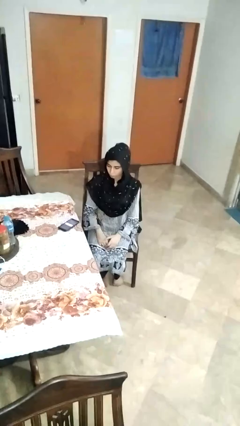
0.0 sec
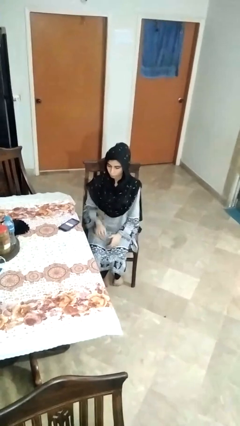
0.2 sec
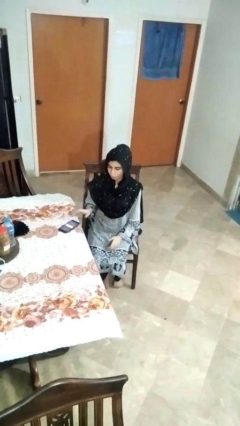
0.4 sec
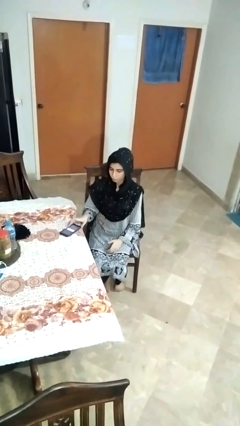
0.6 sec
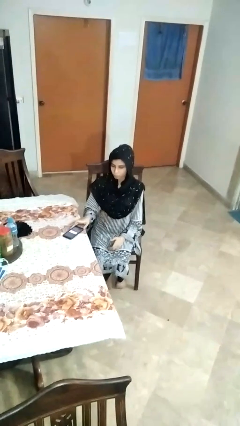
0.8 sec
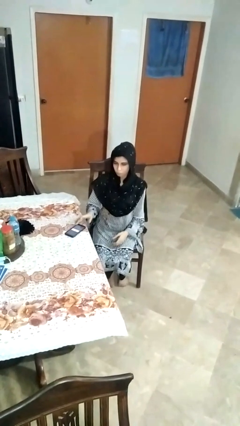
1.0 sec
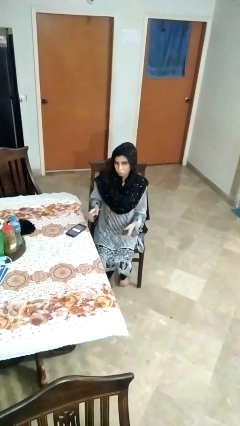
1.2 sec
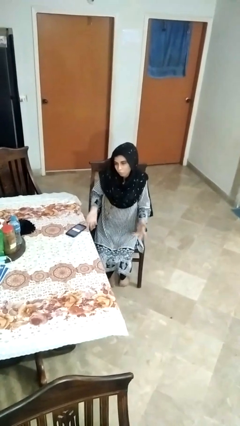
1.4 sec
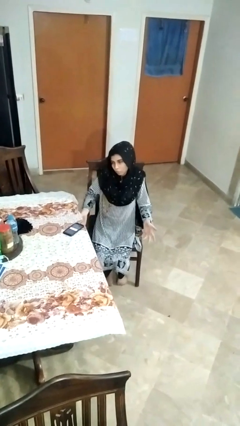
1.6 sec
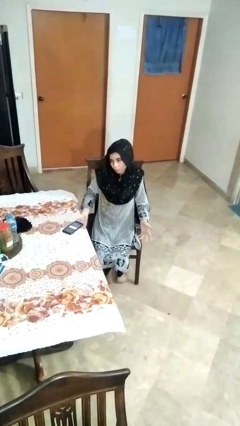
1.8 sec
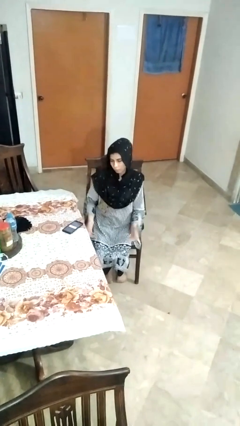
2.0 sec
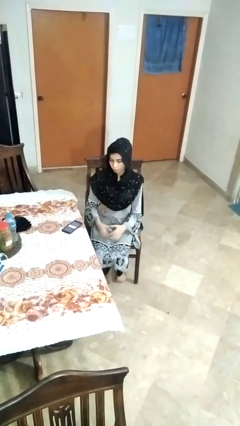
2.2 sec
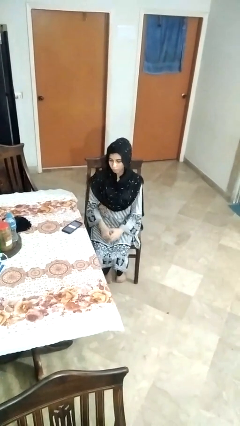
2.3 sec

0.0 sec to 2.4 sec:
person shrugs

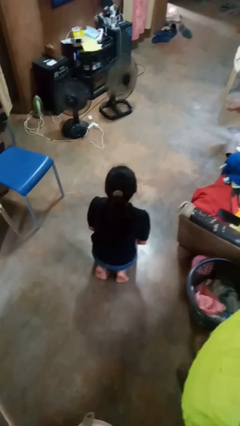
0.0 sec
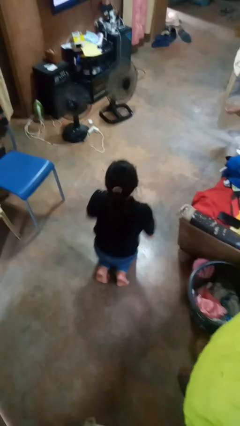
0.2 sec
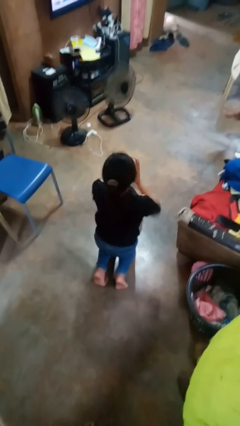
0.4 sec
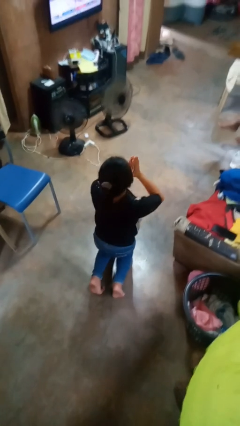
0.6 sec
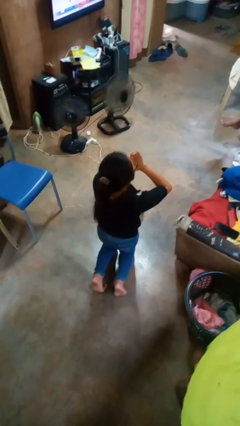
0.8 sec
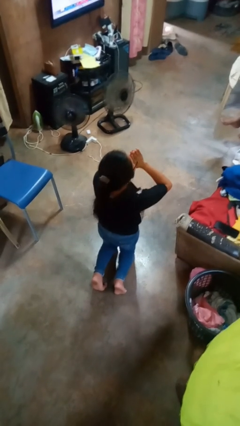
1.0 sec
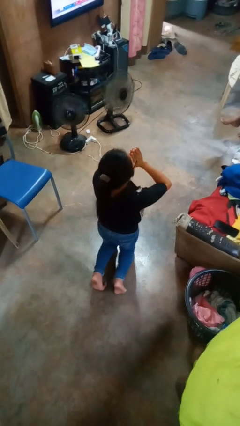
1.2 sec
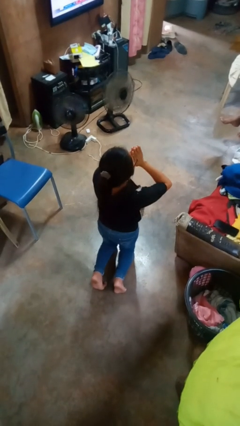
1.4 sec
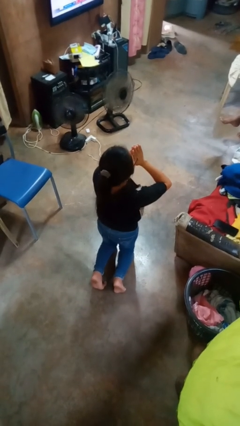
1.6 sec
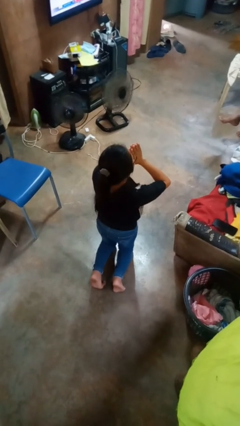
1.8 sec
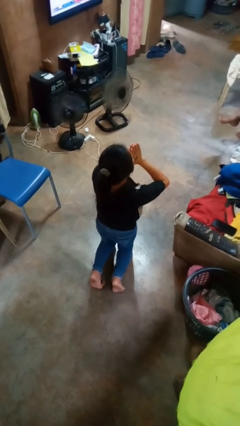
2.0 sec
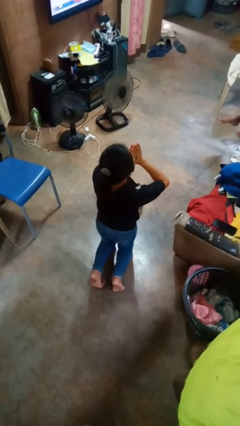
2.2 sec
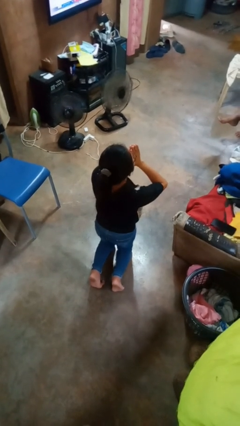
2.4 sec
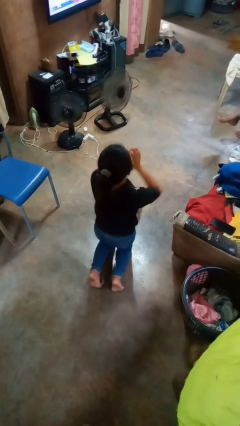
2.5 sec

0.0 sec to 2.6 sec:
person prays

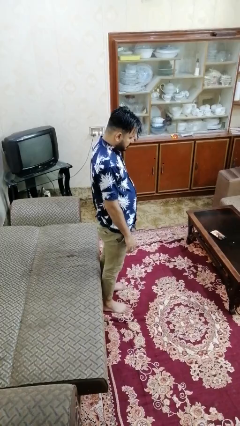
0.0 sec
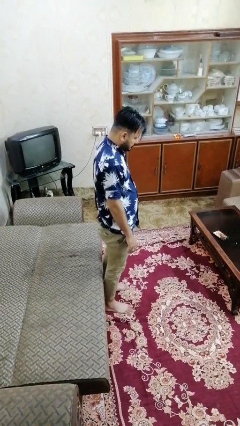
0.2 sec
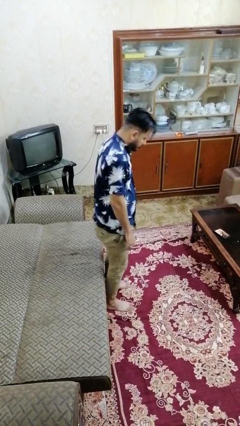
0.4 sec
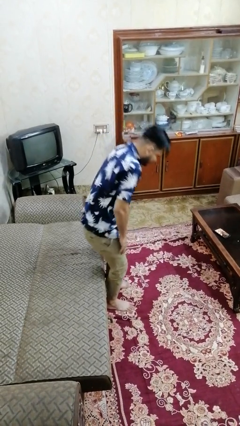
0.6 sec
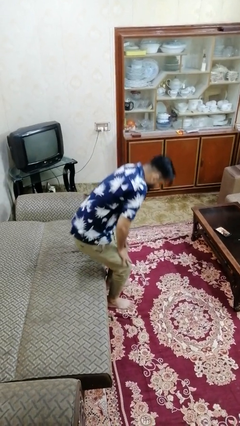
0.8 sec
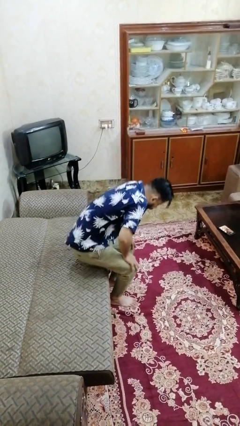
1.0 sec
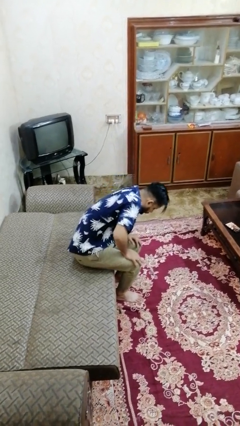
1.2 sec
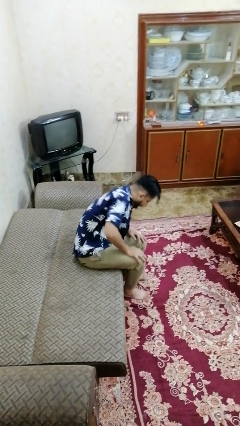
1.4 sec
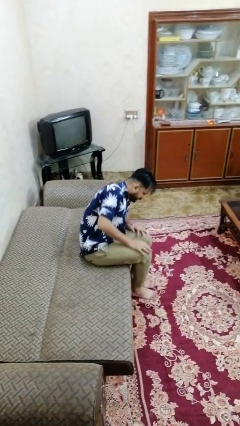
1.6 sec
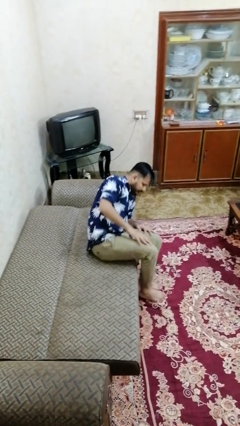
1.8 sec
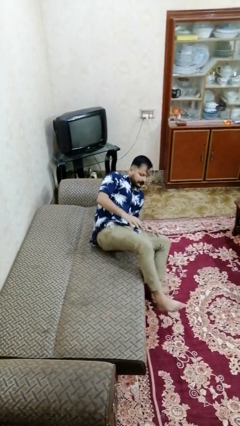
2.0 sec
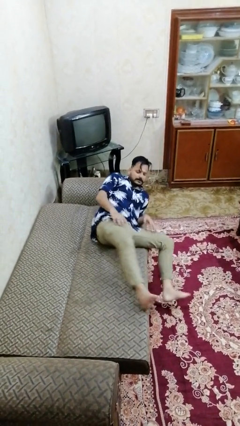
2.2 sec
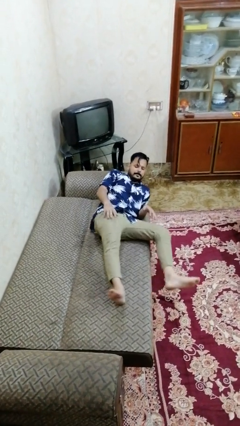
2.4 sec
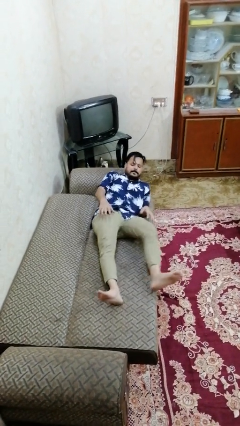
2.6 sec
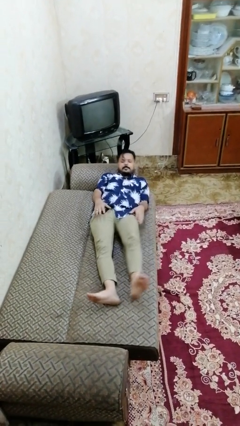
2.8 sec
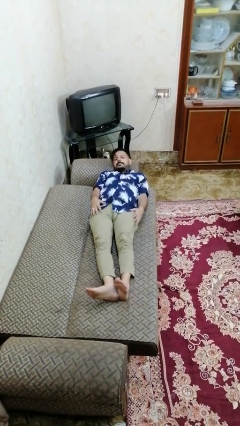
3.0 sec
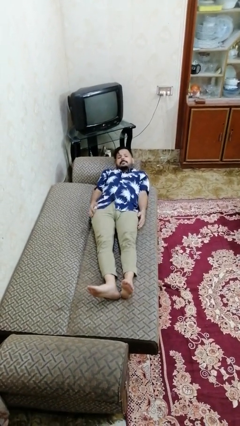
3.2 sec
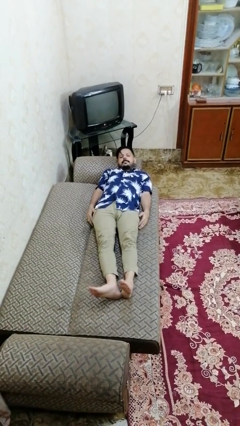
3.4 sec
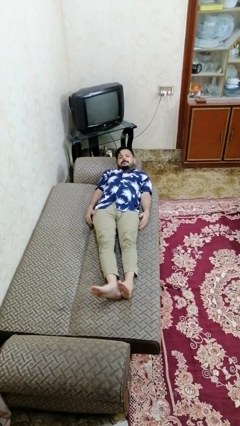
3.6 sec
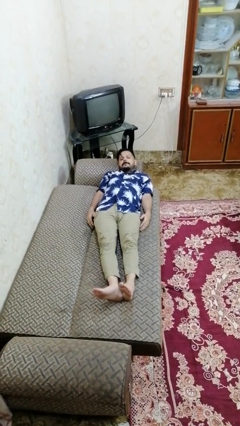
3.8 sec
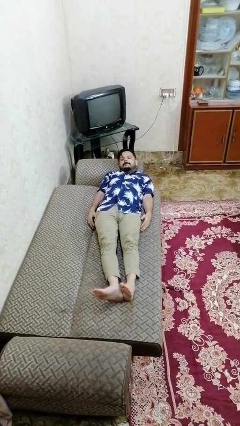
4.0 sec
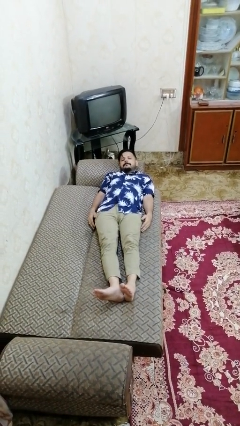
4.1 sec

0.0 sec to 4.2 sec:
person lies down on bed

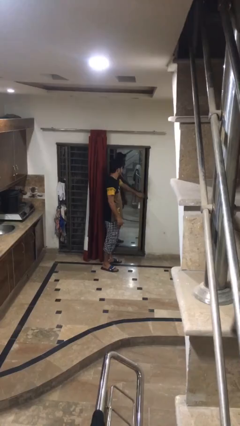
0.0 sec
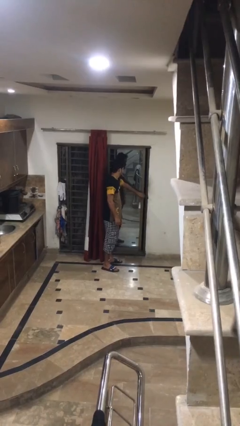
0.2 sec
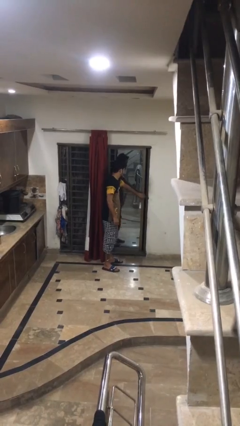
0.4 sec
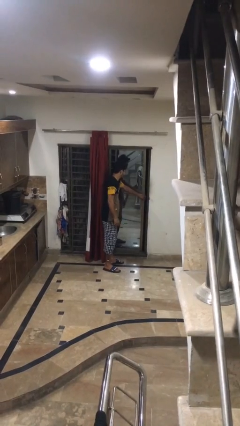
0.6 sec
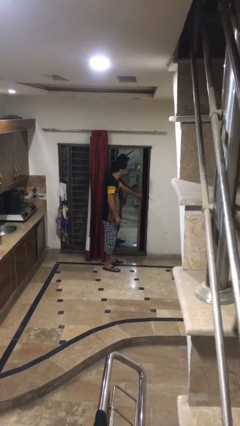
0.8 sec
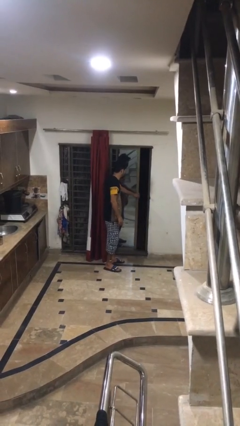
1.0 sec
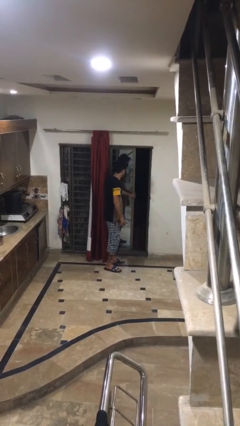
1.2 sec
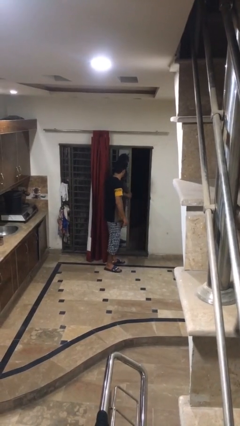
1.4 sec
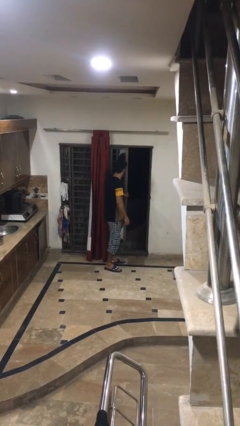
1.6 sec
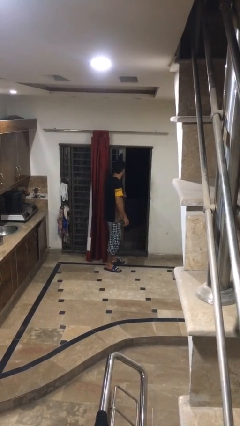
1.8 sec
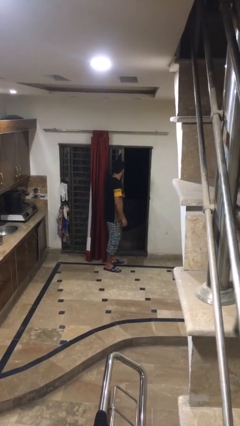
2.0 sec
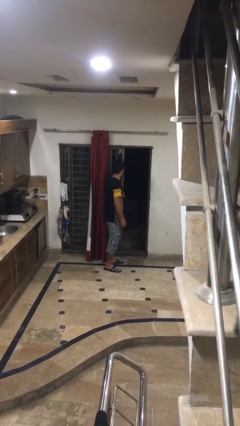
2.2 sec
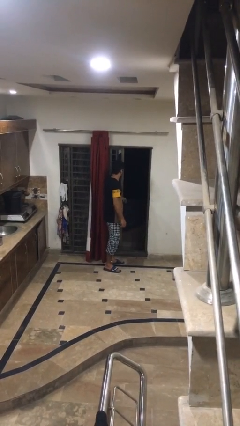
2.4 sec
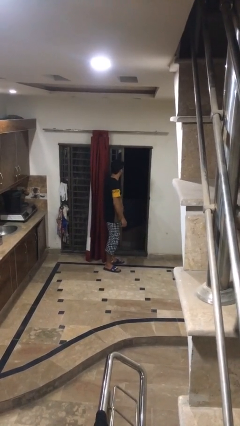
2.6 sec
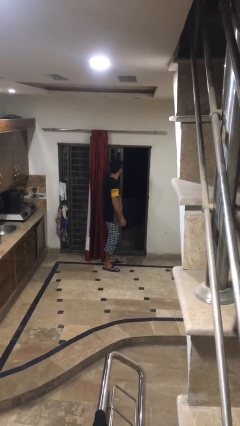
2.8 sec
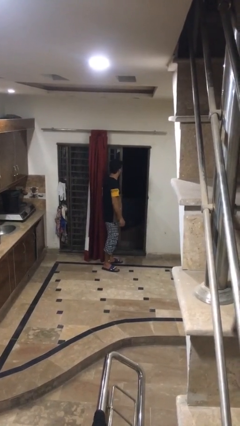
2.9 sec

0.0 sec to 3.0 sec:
person opens home window

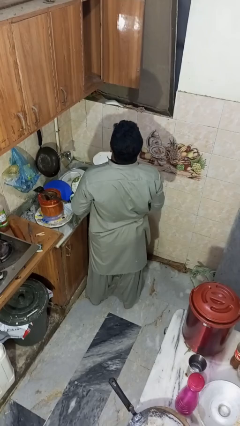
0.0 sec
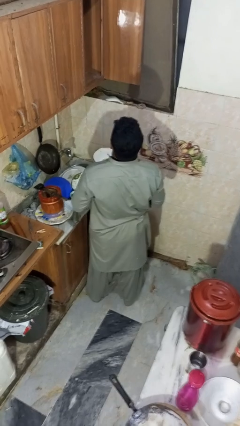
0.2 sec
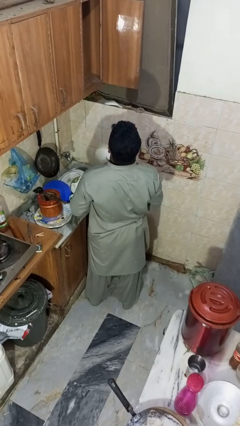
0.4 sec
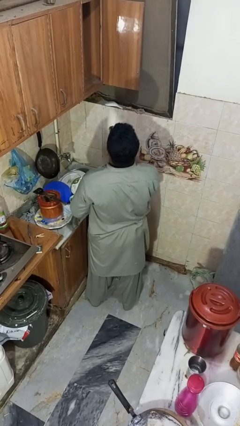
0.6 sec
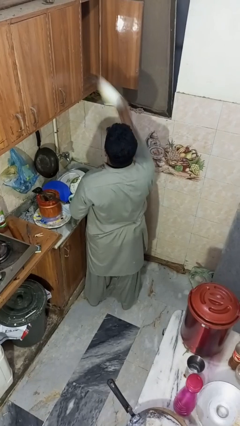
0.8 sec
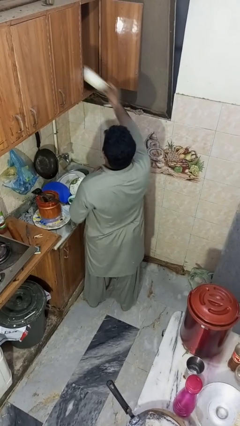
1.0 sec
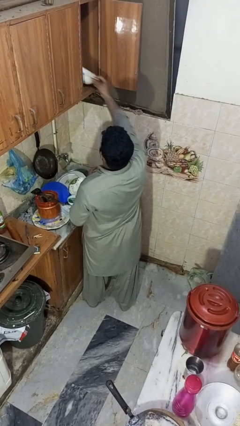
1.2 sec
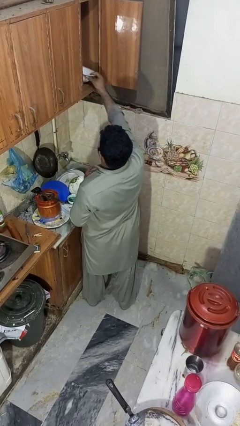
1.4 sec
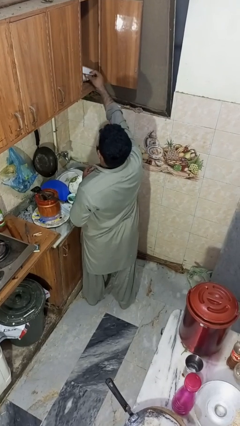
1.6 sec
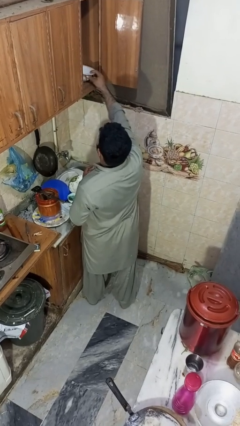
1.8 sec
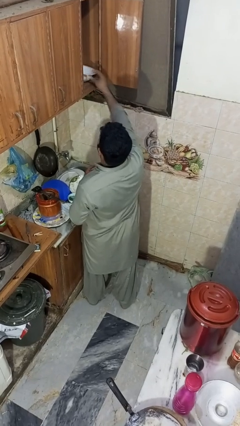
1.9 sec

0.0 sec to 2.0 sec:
person puts object in cabinet

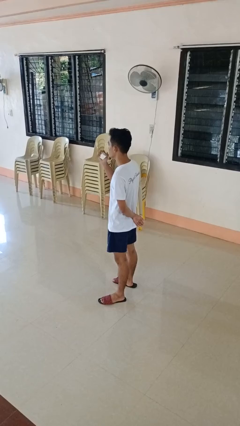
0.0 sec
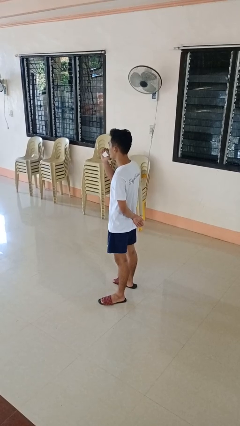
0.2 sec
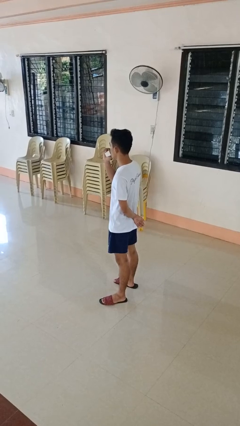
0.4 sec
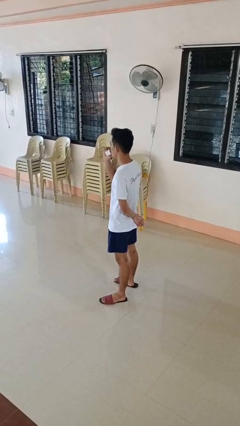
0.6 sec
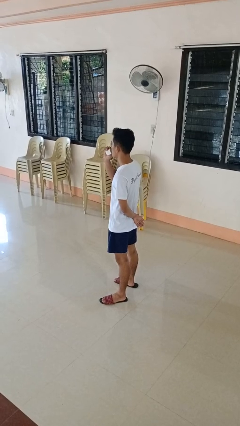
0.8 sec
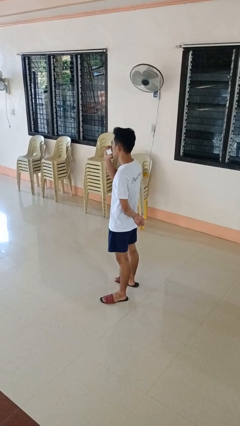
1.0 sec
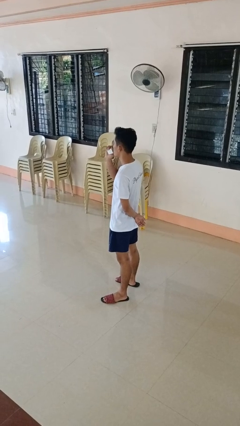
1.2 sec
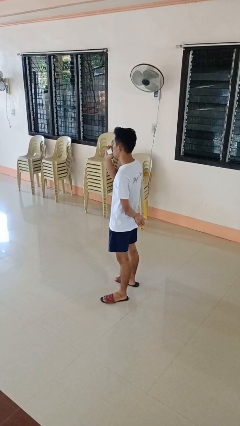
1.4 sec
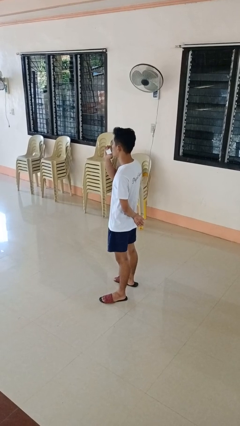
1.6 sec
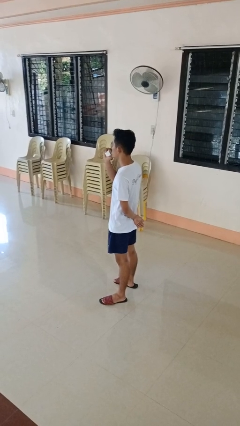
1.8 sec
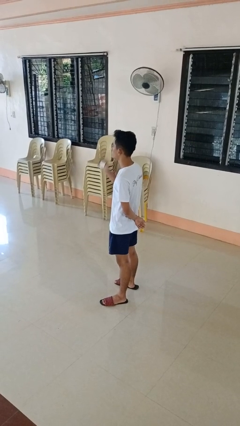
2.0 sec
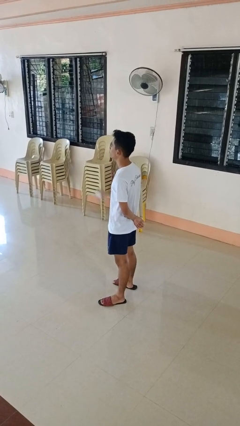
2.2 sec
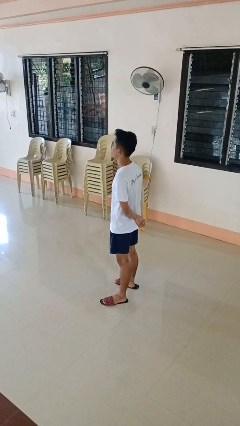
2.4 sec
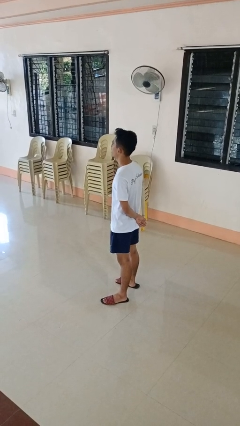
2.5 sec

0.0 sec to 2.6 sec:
person vapes

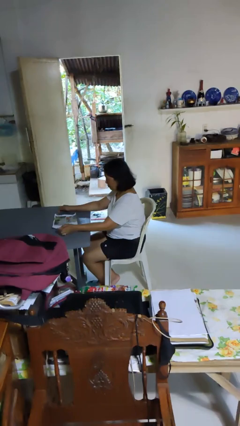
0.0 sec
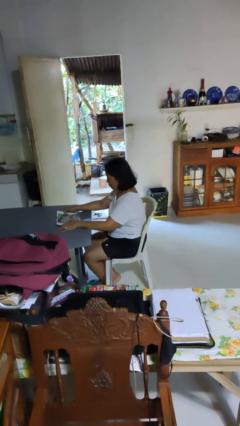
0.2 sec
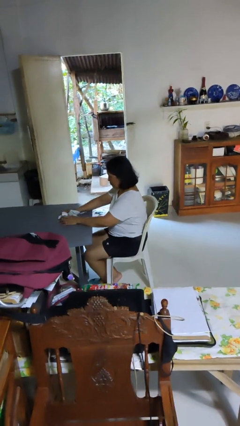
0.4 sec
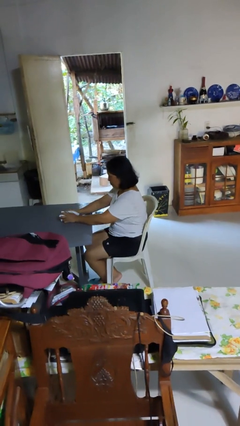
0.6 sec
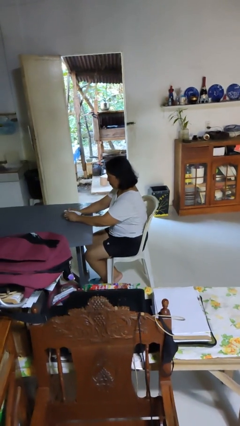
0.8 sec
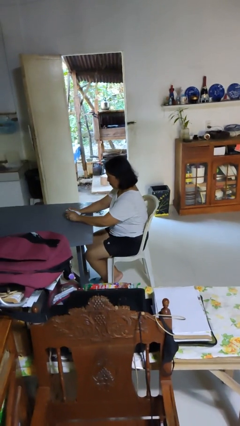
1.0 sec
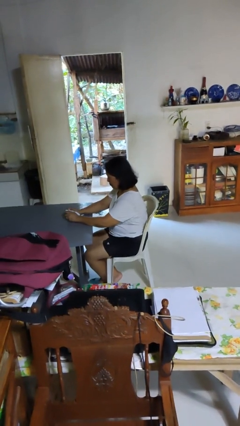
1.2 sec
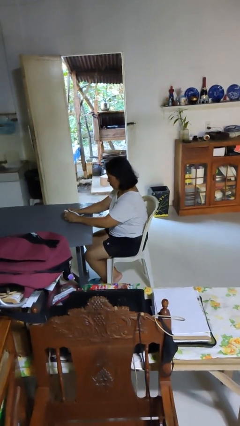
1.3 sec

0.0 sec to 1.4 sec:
person crumples paper
